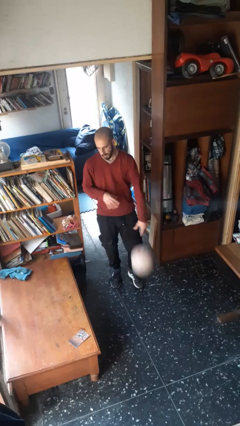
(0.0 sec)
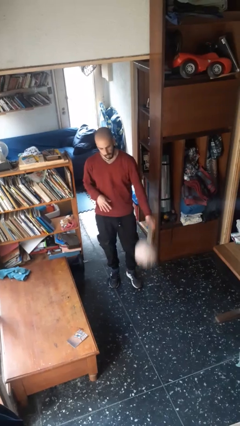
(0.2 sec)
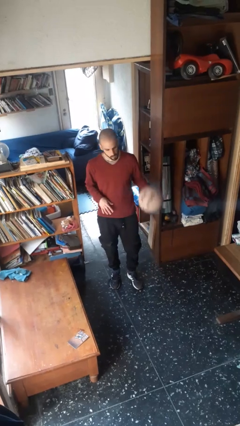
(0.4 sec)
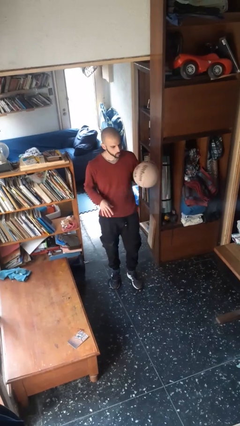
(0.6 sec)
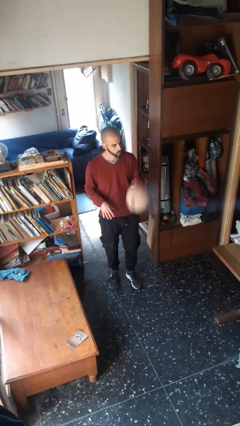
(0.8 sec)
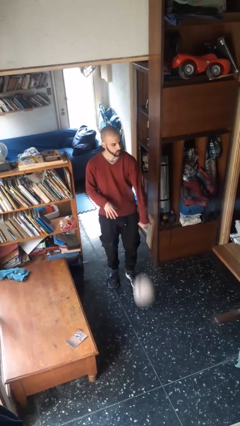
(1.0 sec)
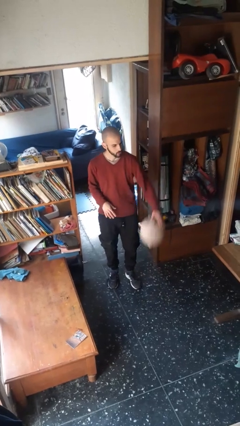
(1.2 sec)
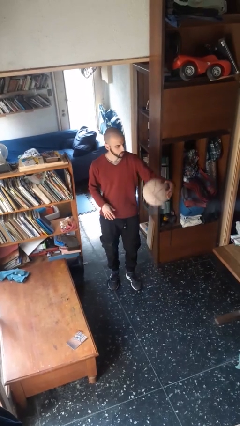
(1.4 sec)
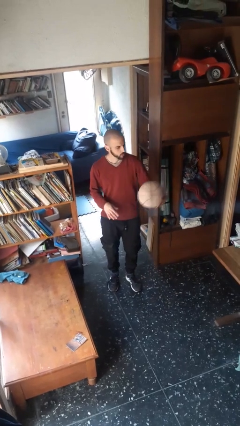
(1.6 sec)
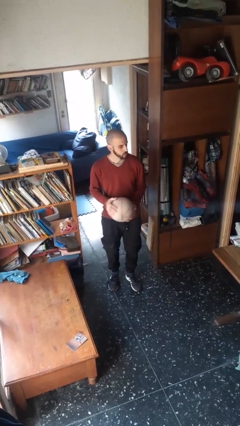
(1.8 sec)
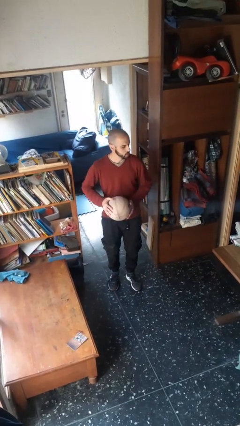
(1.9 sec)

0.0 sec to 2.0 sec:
person bounces ball on floor

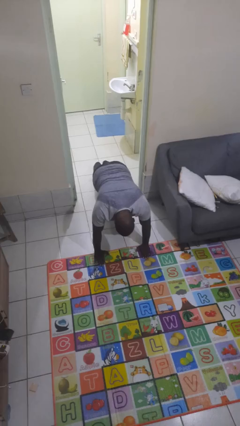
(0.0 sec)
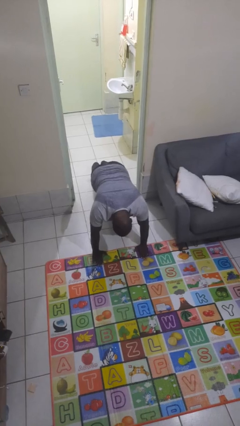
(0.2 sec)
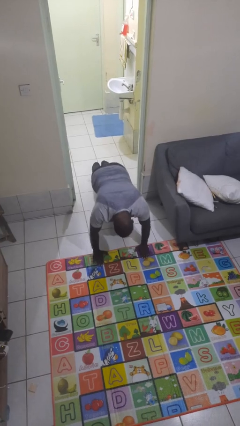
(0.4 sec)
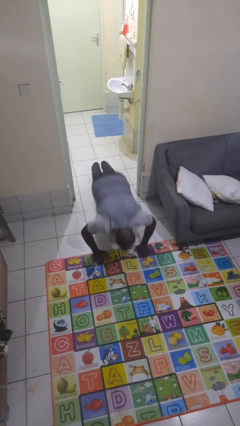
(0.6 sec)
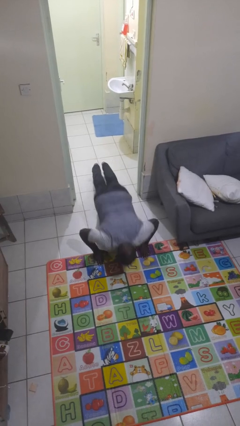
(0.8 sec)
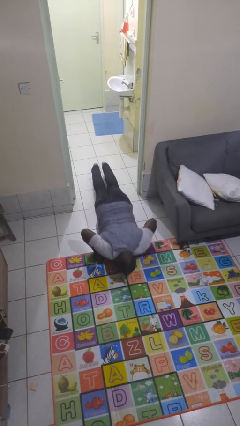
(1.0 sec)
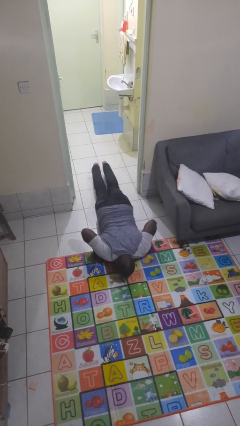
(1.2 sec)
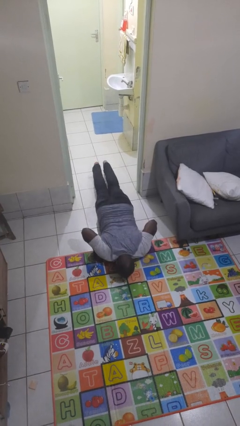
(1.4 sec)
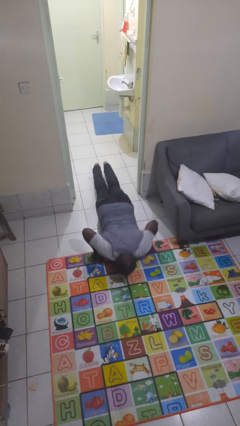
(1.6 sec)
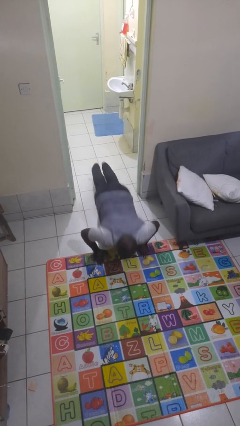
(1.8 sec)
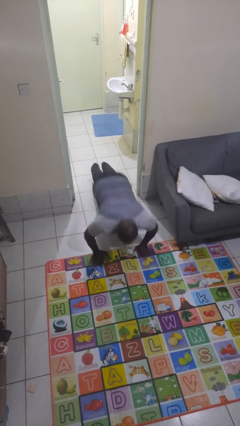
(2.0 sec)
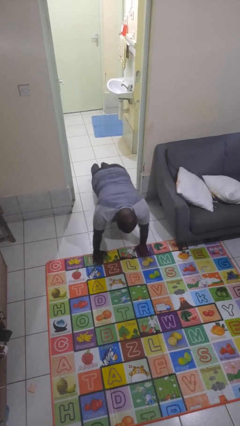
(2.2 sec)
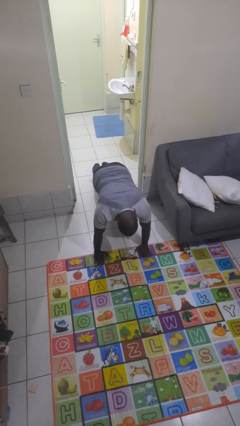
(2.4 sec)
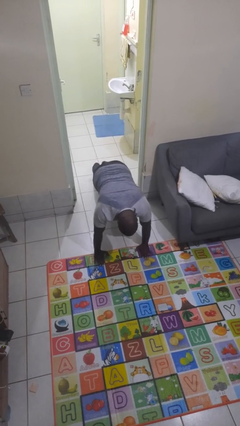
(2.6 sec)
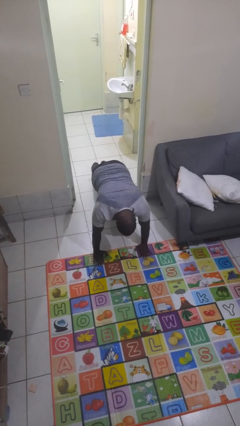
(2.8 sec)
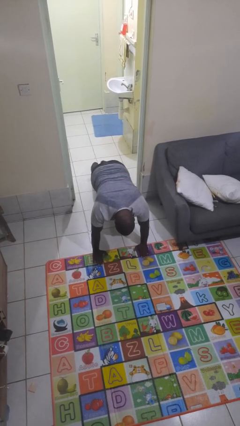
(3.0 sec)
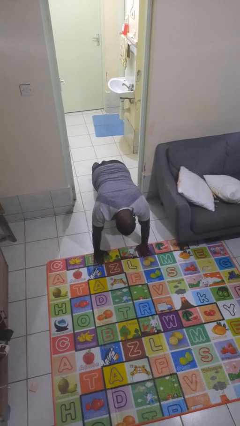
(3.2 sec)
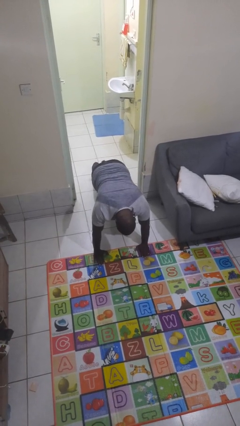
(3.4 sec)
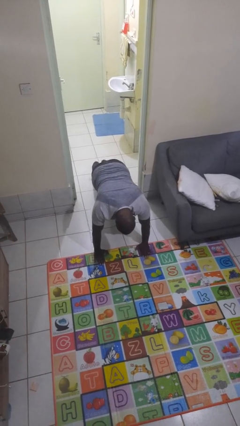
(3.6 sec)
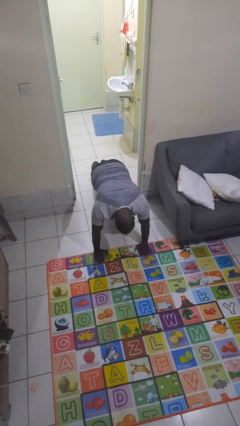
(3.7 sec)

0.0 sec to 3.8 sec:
person exercises with pushup

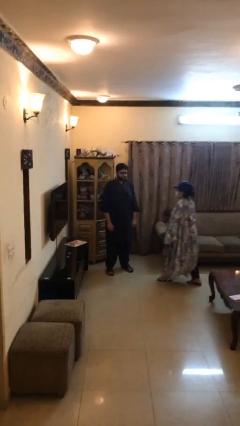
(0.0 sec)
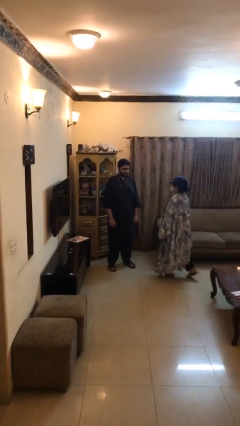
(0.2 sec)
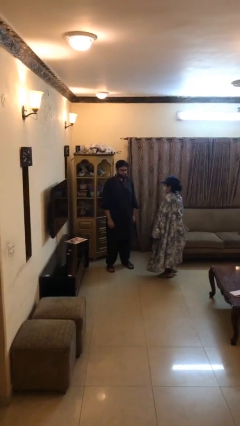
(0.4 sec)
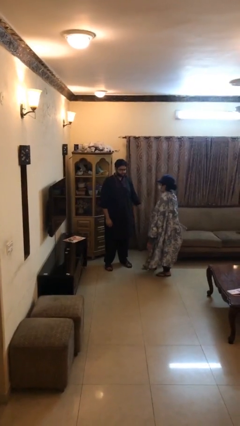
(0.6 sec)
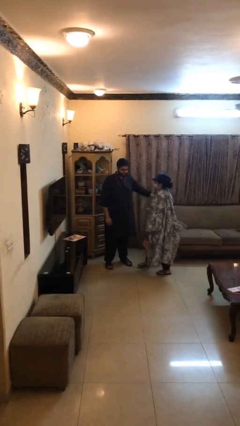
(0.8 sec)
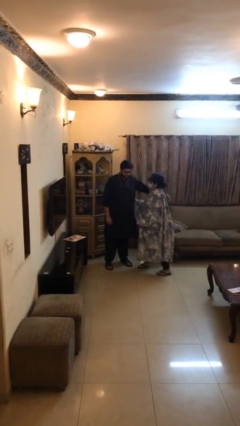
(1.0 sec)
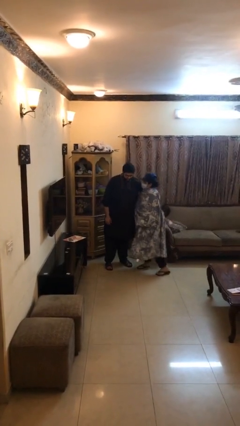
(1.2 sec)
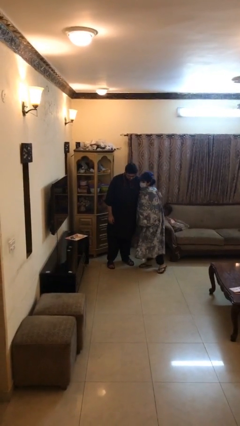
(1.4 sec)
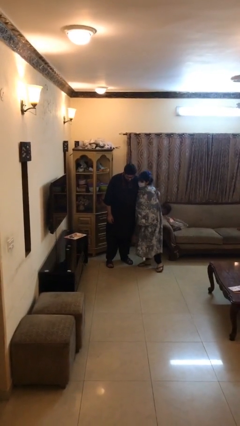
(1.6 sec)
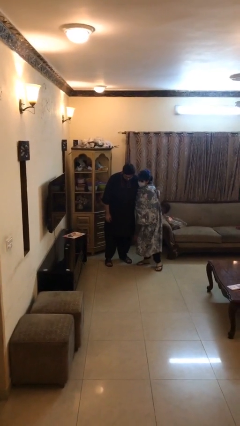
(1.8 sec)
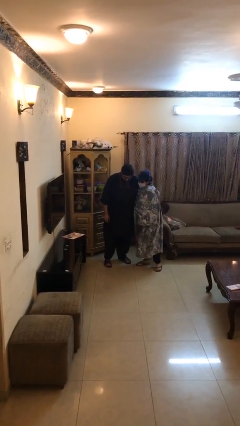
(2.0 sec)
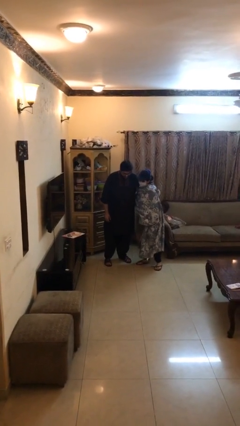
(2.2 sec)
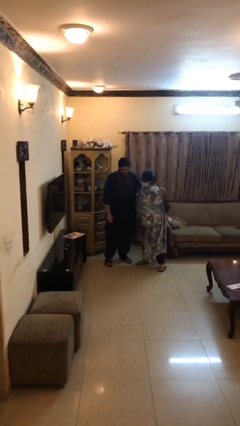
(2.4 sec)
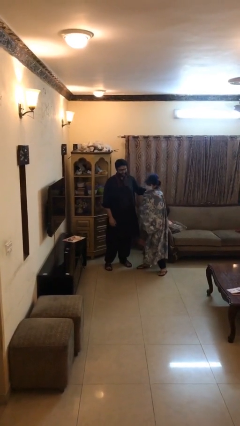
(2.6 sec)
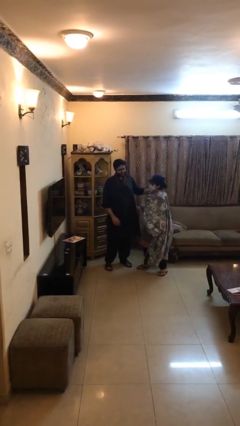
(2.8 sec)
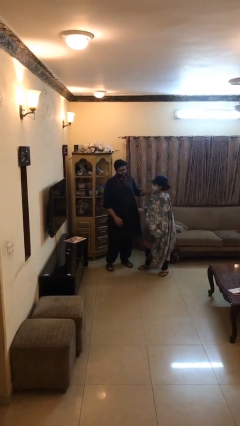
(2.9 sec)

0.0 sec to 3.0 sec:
person embraces person

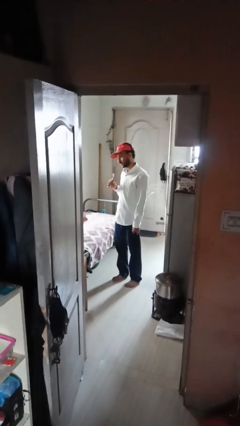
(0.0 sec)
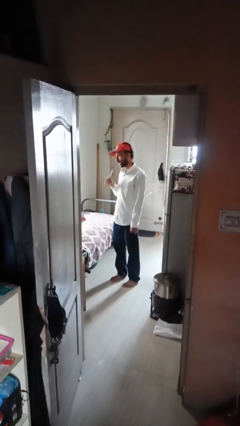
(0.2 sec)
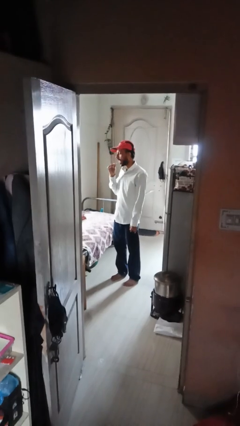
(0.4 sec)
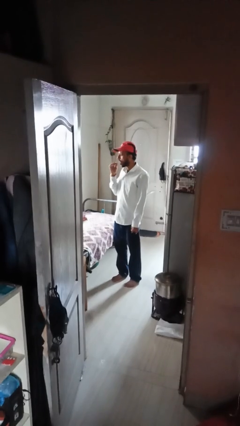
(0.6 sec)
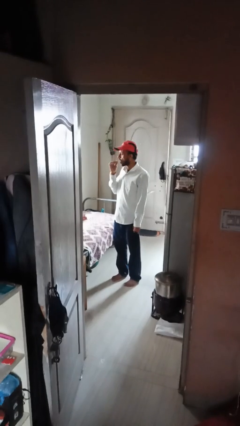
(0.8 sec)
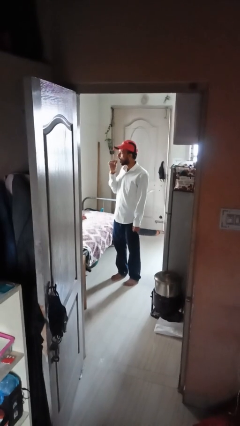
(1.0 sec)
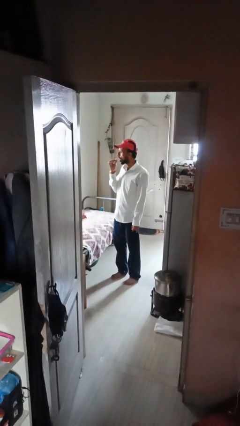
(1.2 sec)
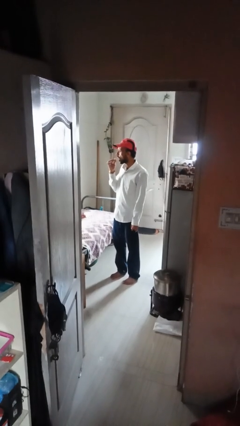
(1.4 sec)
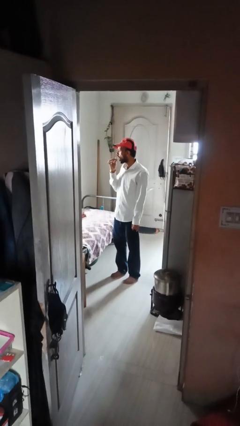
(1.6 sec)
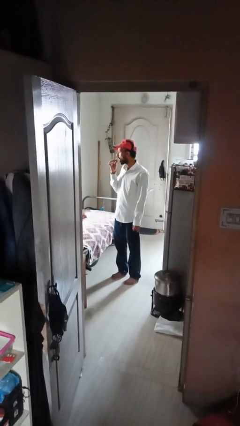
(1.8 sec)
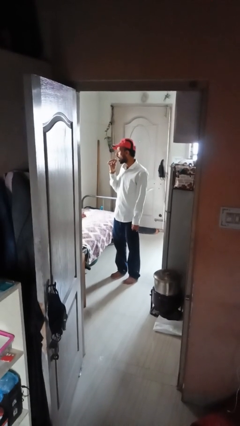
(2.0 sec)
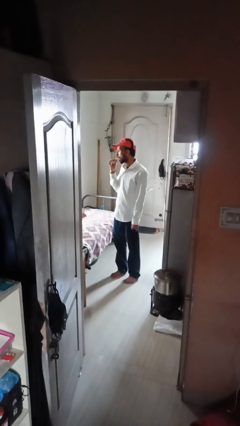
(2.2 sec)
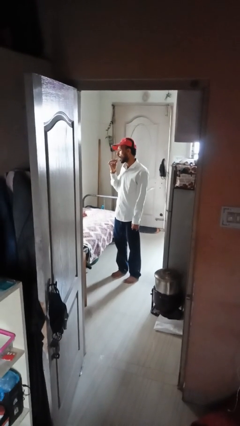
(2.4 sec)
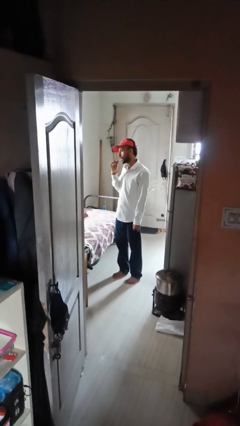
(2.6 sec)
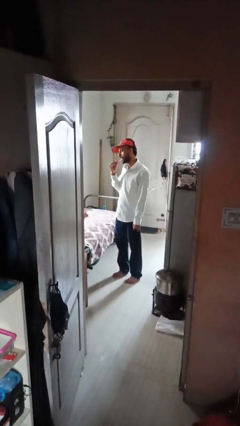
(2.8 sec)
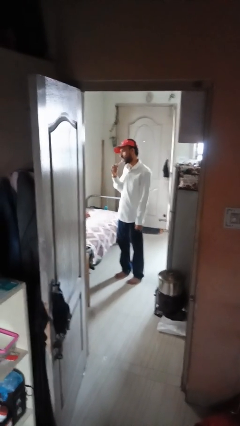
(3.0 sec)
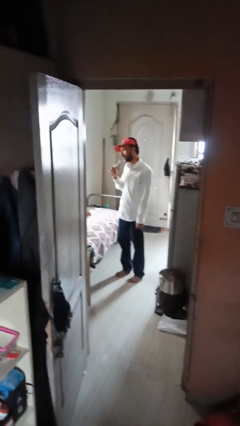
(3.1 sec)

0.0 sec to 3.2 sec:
person brushes teeth

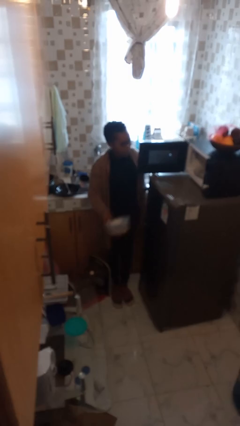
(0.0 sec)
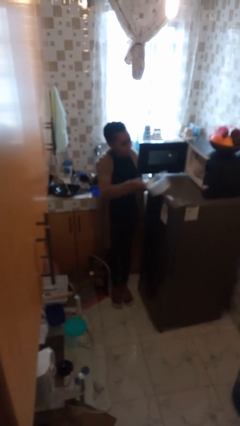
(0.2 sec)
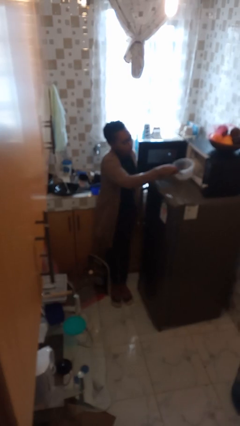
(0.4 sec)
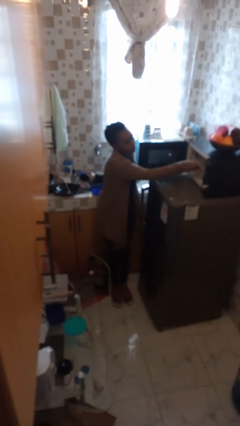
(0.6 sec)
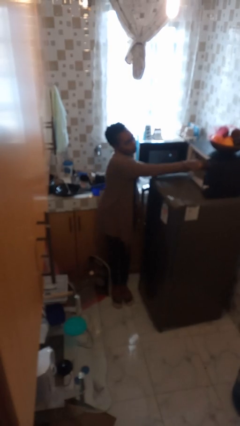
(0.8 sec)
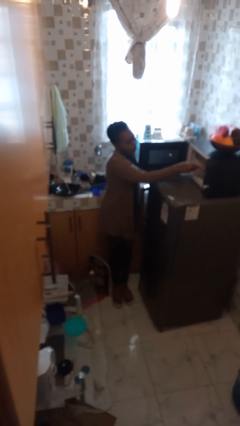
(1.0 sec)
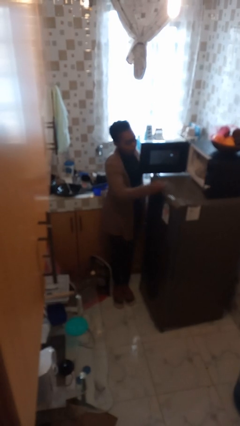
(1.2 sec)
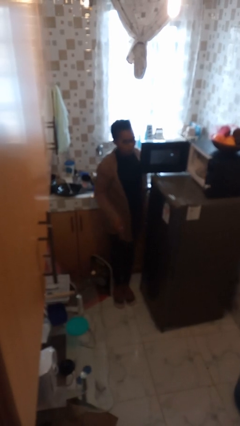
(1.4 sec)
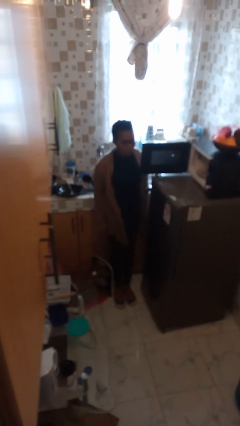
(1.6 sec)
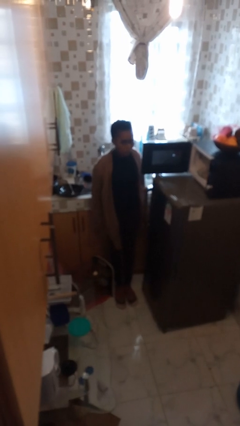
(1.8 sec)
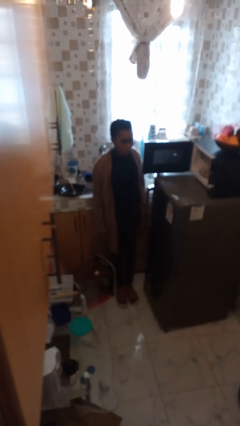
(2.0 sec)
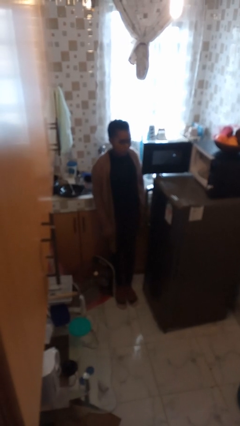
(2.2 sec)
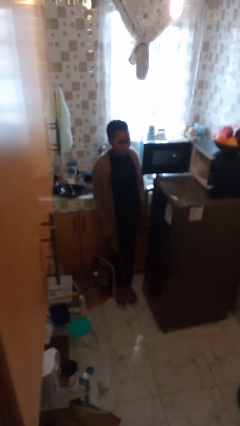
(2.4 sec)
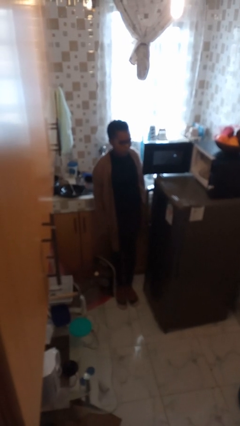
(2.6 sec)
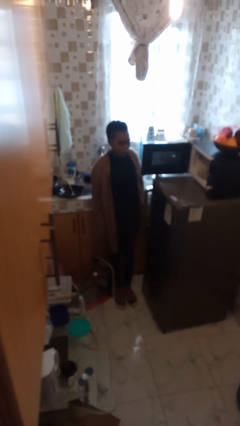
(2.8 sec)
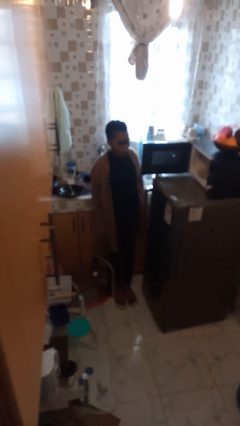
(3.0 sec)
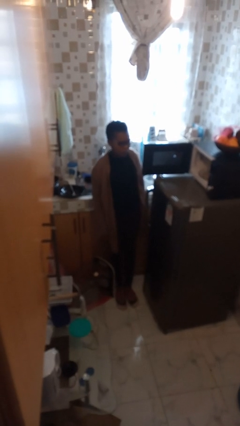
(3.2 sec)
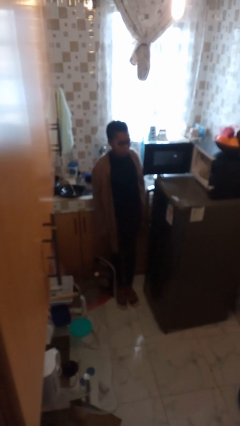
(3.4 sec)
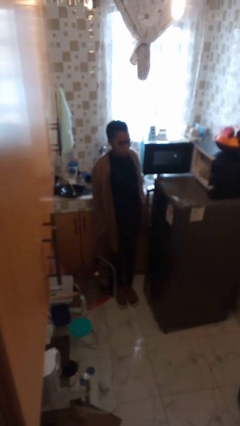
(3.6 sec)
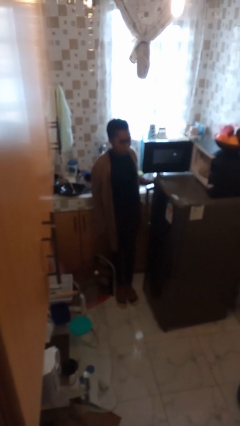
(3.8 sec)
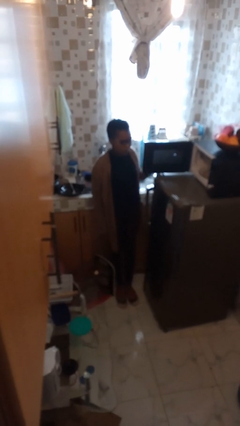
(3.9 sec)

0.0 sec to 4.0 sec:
person puts object into microwave

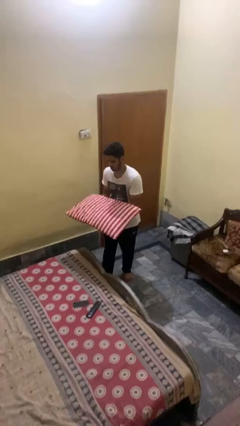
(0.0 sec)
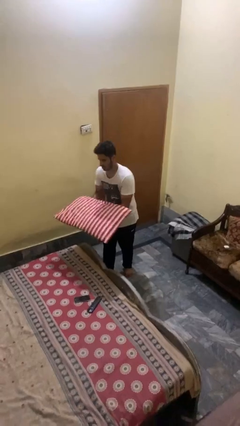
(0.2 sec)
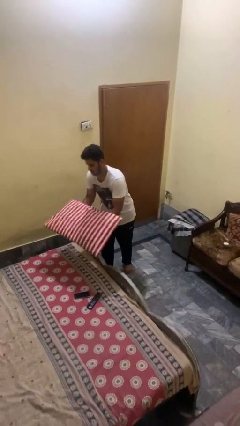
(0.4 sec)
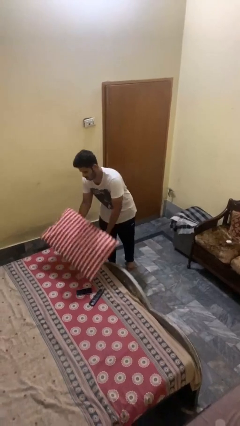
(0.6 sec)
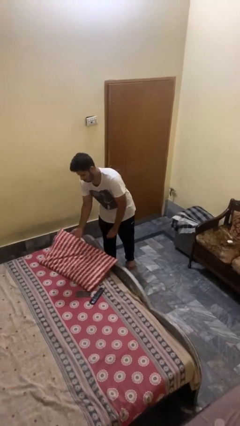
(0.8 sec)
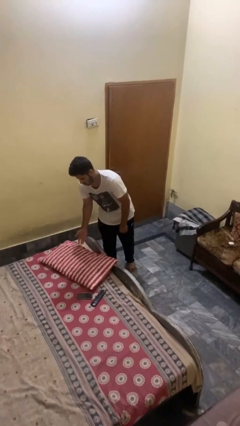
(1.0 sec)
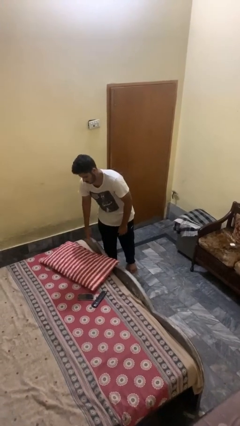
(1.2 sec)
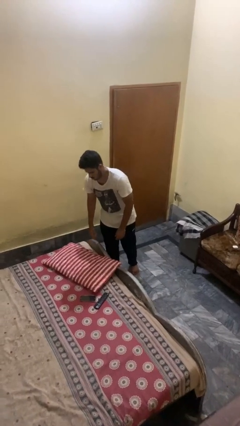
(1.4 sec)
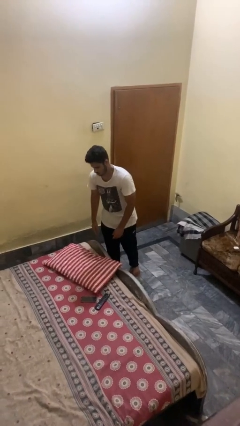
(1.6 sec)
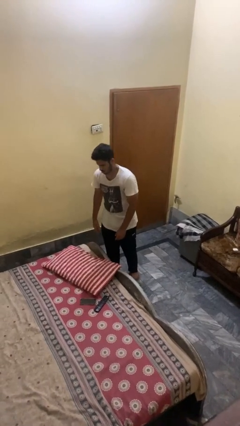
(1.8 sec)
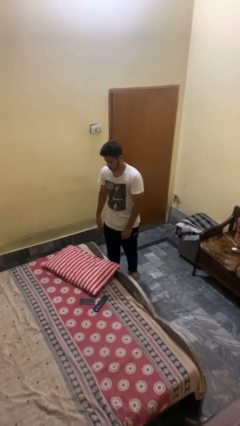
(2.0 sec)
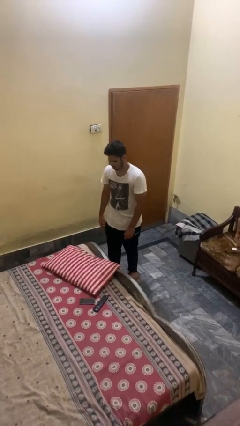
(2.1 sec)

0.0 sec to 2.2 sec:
person puts down object on bed
